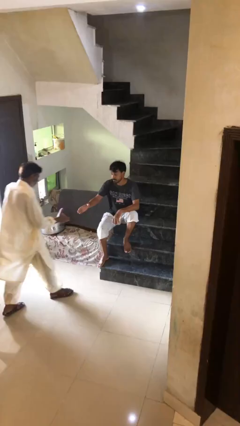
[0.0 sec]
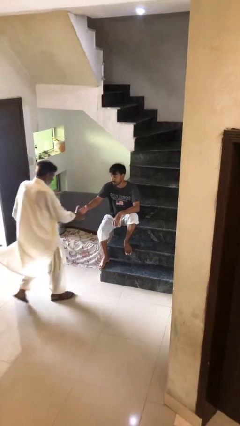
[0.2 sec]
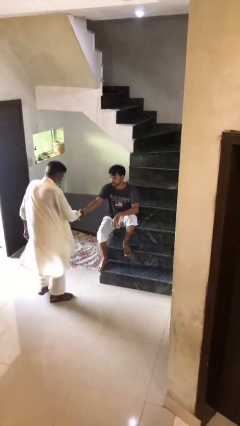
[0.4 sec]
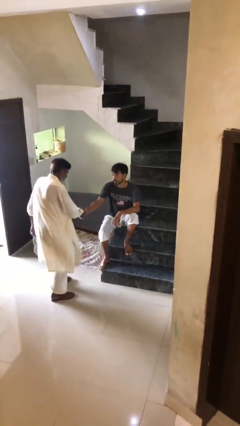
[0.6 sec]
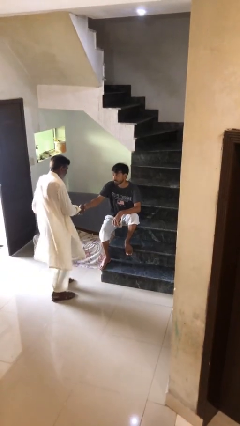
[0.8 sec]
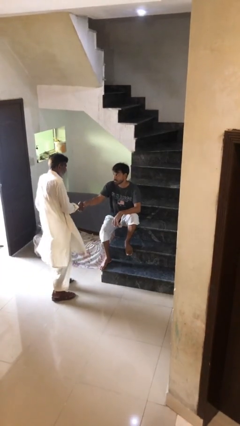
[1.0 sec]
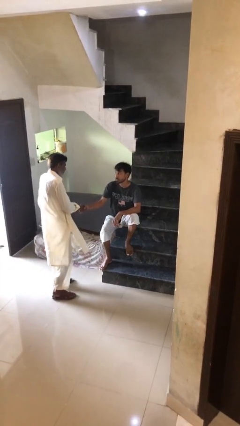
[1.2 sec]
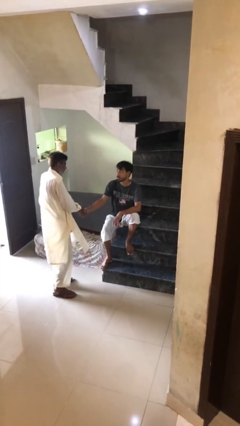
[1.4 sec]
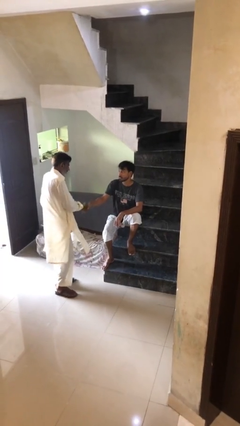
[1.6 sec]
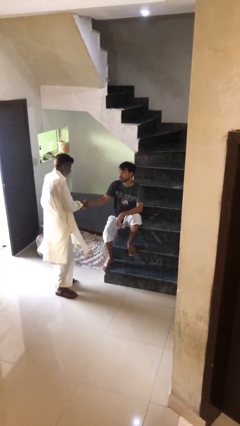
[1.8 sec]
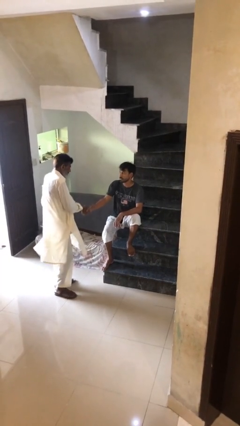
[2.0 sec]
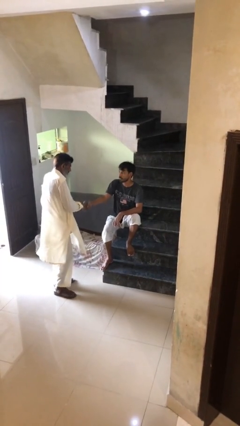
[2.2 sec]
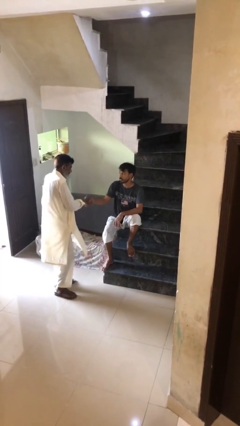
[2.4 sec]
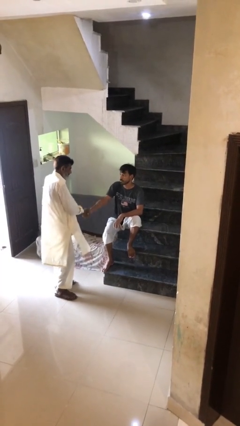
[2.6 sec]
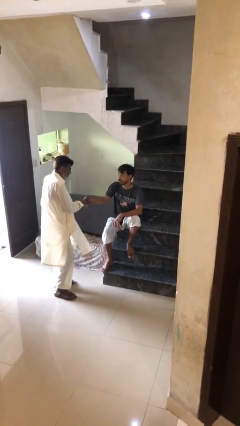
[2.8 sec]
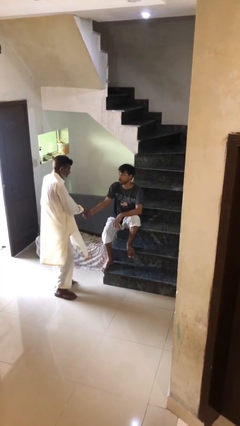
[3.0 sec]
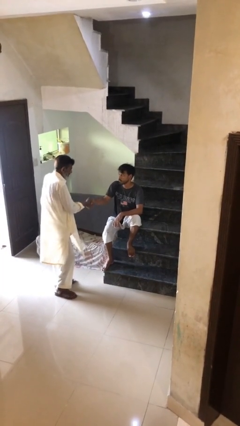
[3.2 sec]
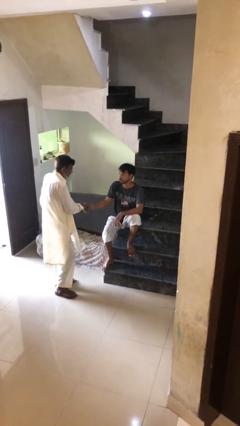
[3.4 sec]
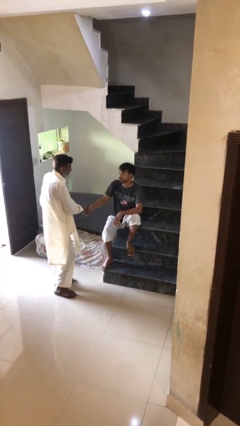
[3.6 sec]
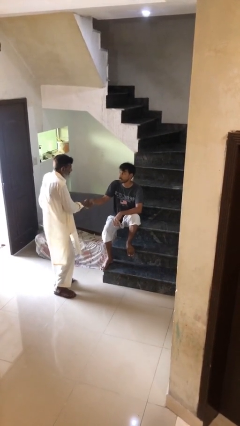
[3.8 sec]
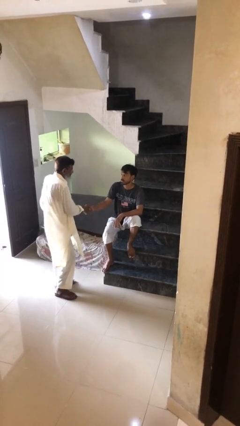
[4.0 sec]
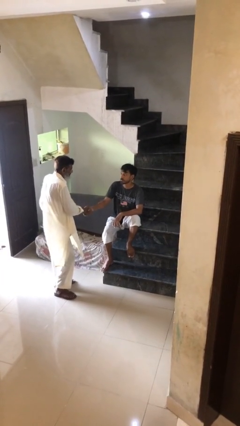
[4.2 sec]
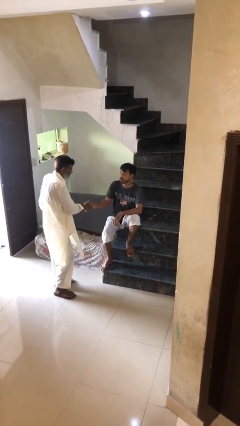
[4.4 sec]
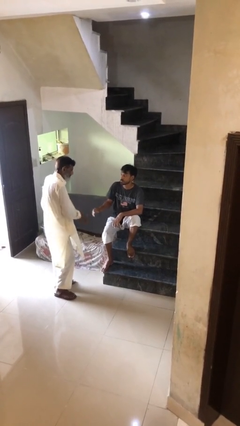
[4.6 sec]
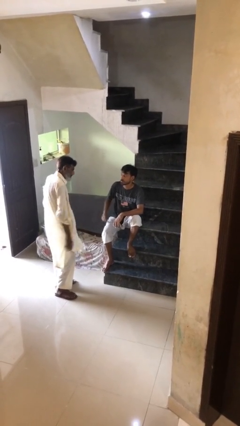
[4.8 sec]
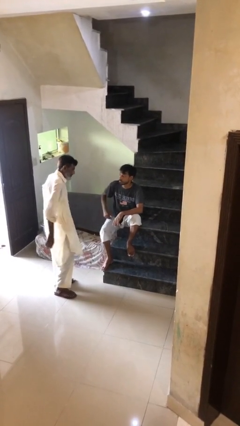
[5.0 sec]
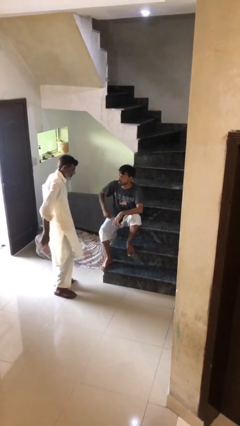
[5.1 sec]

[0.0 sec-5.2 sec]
person shakes hand

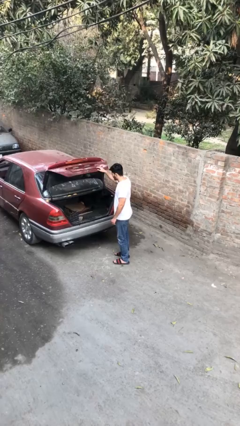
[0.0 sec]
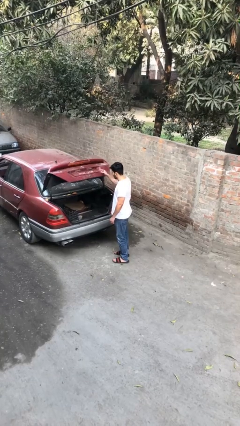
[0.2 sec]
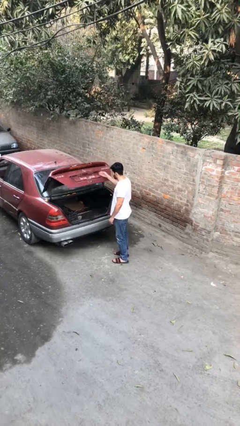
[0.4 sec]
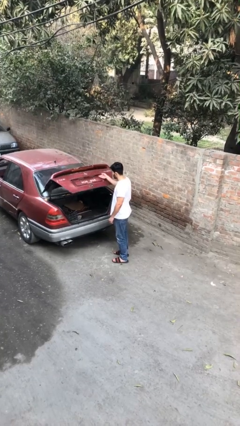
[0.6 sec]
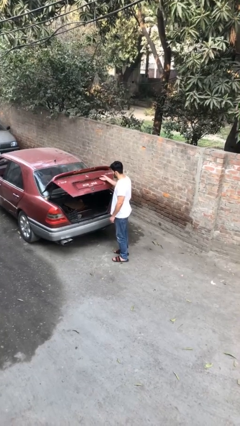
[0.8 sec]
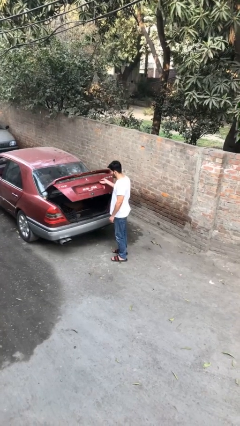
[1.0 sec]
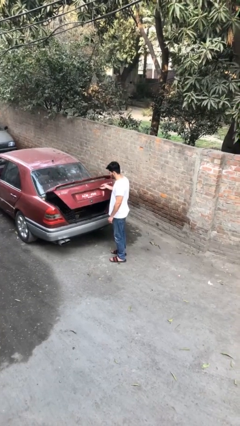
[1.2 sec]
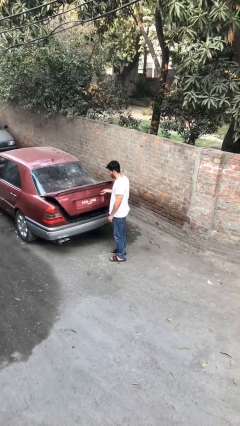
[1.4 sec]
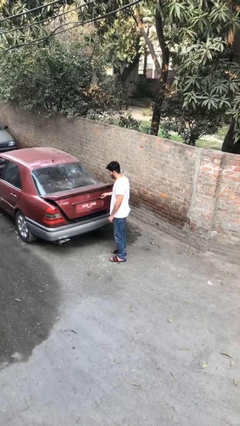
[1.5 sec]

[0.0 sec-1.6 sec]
person closes car trunk

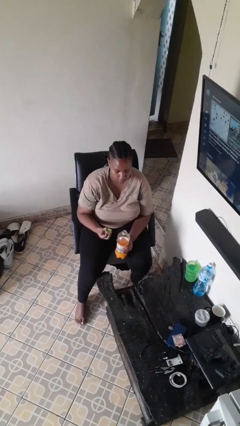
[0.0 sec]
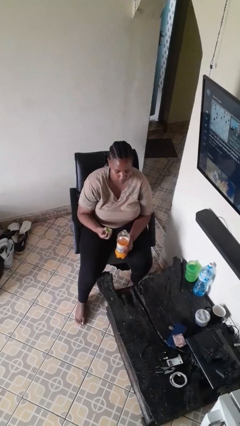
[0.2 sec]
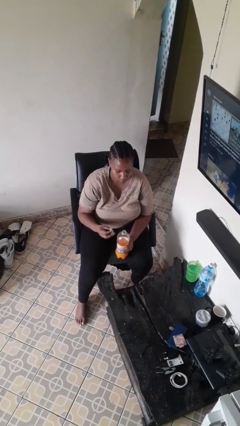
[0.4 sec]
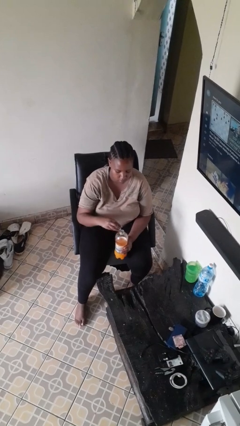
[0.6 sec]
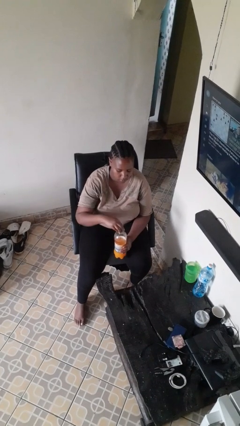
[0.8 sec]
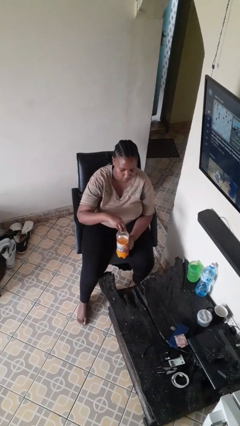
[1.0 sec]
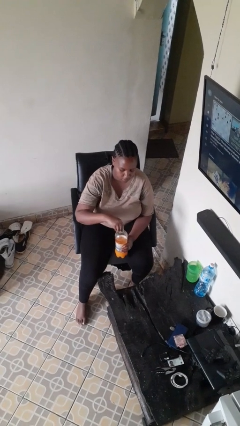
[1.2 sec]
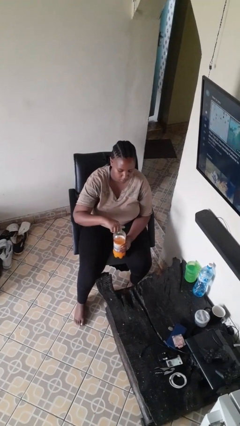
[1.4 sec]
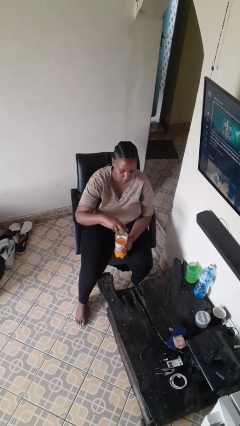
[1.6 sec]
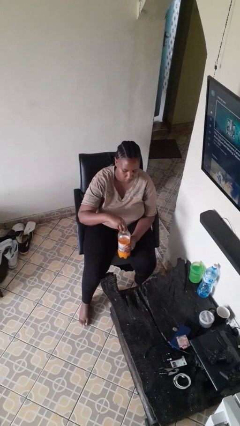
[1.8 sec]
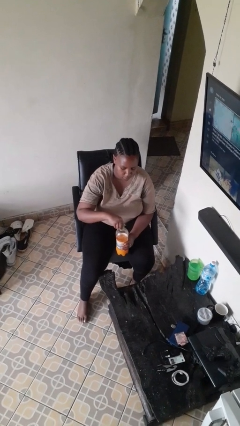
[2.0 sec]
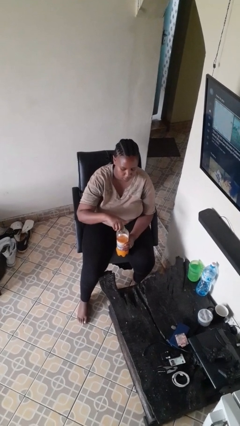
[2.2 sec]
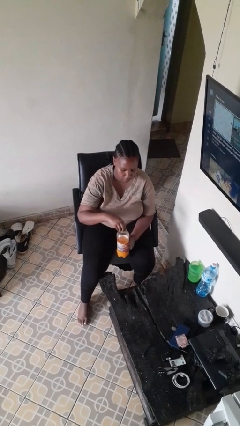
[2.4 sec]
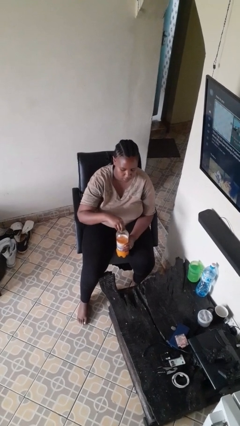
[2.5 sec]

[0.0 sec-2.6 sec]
person screws lid to bottle

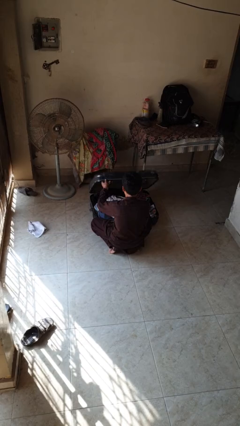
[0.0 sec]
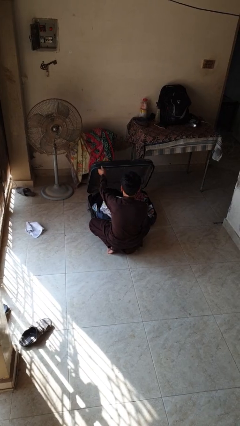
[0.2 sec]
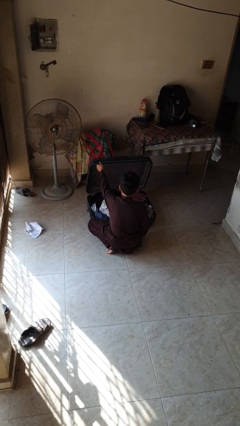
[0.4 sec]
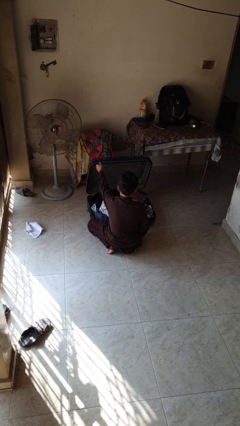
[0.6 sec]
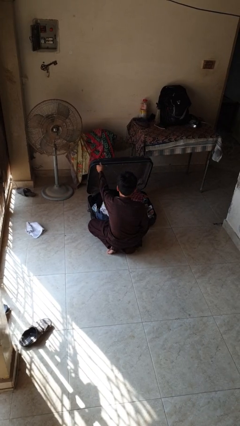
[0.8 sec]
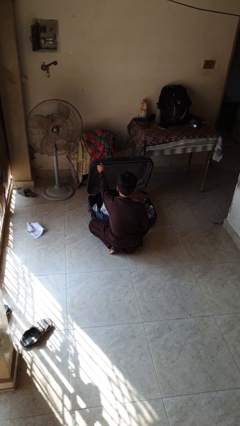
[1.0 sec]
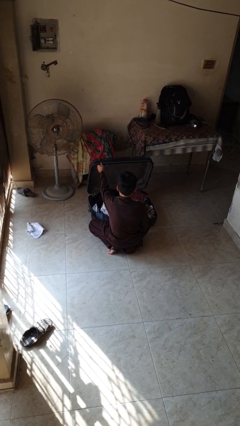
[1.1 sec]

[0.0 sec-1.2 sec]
person opens suitcase

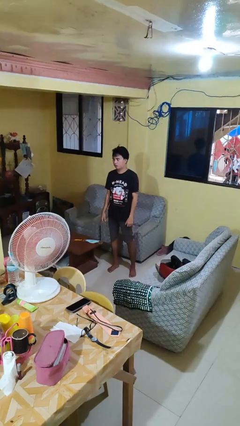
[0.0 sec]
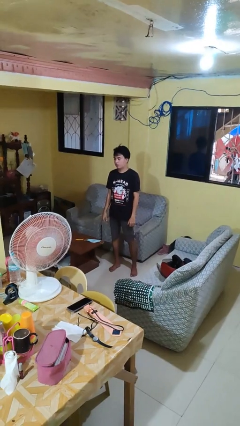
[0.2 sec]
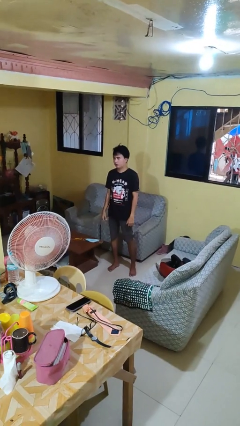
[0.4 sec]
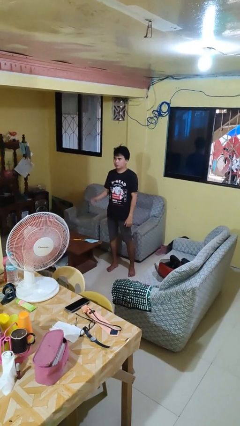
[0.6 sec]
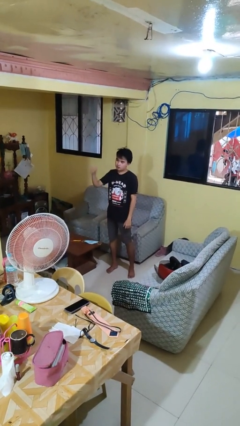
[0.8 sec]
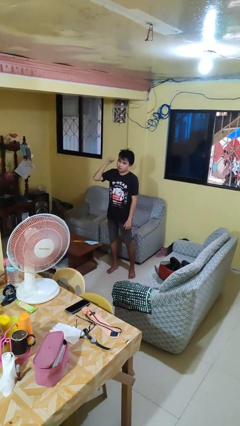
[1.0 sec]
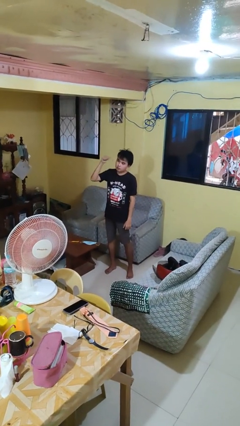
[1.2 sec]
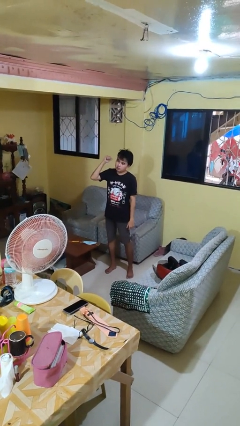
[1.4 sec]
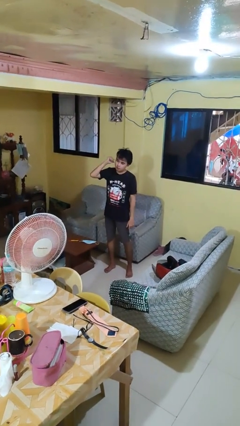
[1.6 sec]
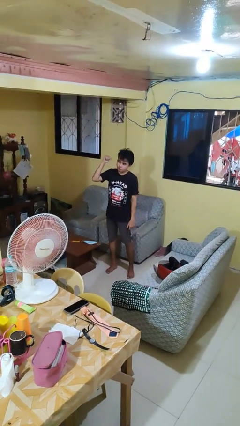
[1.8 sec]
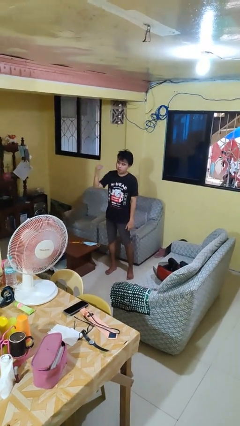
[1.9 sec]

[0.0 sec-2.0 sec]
person gestures behind me

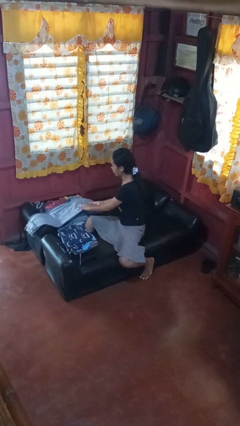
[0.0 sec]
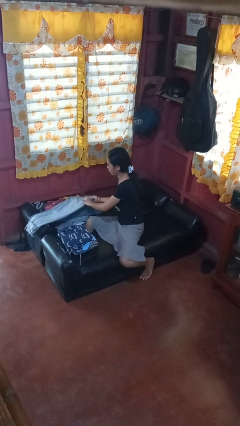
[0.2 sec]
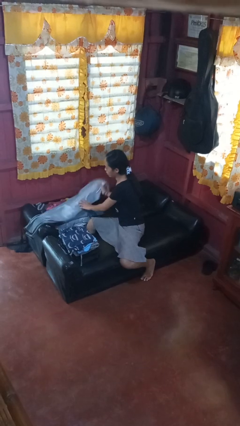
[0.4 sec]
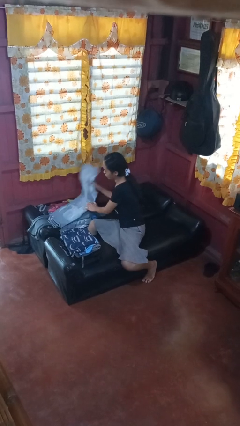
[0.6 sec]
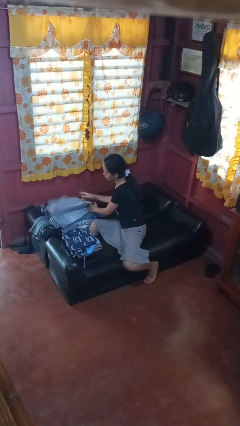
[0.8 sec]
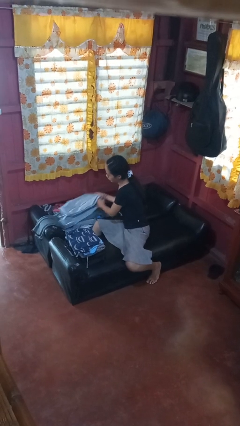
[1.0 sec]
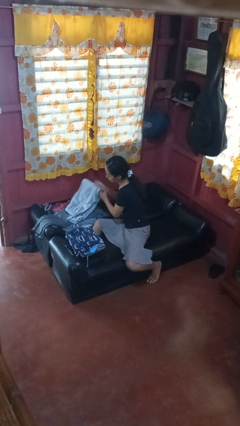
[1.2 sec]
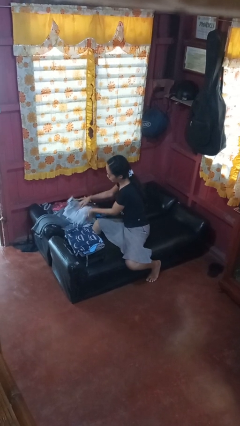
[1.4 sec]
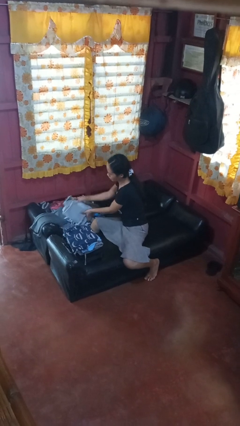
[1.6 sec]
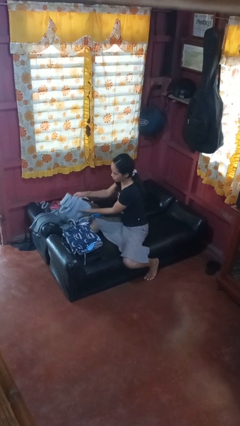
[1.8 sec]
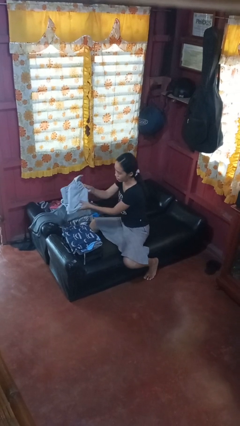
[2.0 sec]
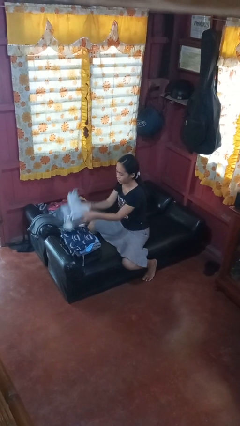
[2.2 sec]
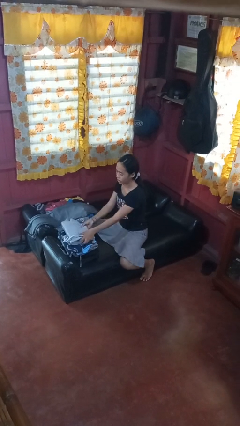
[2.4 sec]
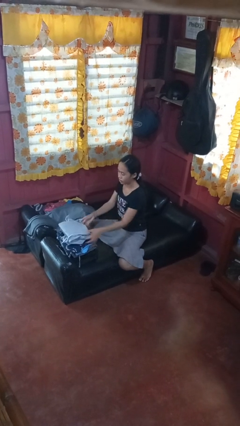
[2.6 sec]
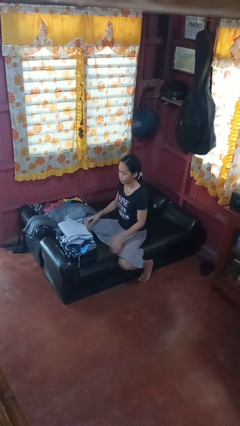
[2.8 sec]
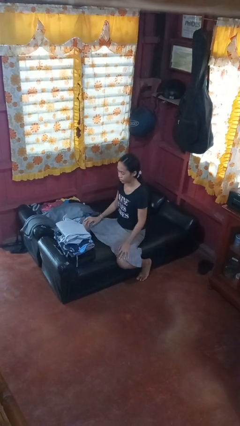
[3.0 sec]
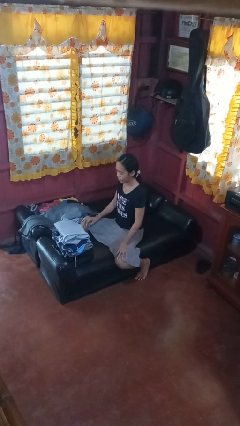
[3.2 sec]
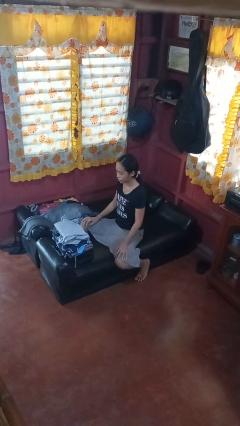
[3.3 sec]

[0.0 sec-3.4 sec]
person folds pants

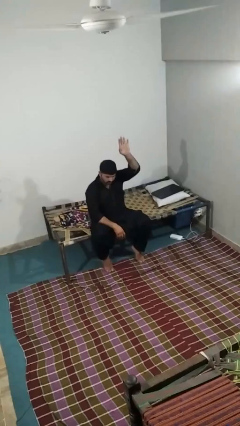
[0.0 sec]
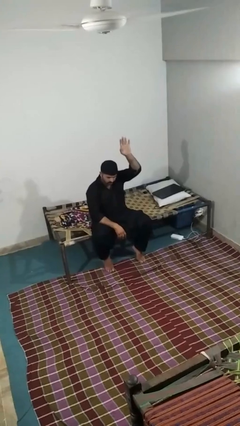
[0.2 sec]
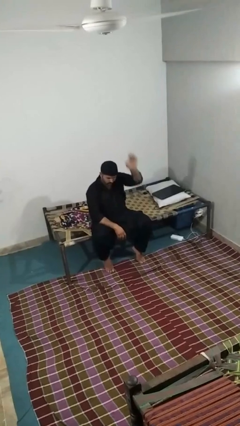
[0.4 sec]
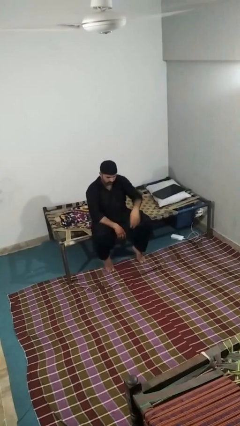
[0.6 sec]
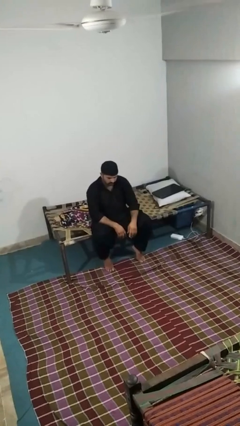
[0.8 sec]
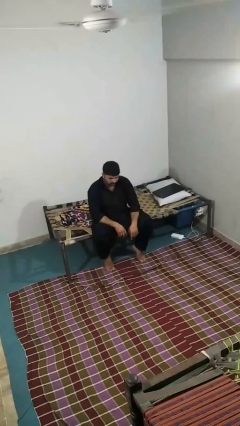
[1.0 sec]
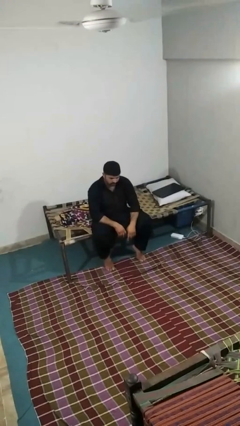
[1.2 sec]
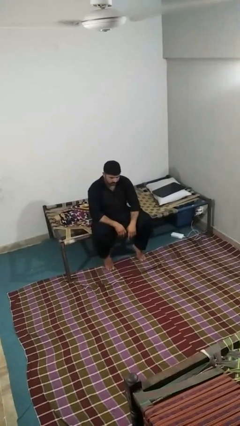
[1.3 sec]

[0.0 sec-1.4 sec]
person gestures lower hand
